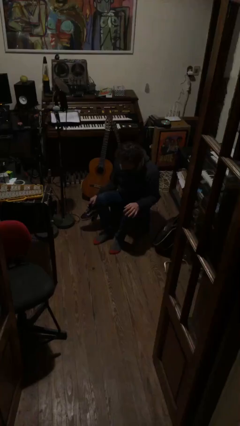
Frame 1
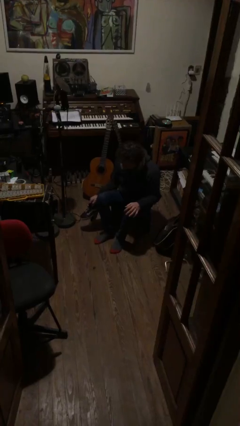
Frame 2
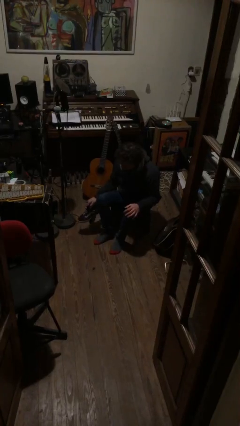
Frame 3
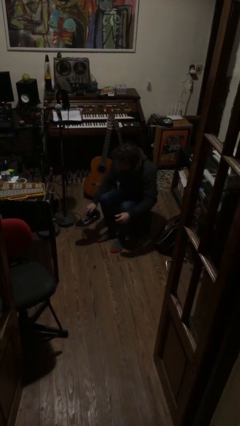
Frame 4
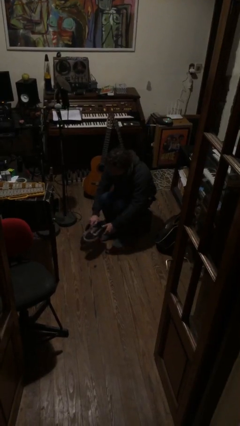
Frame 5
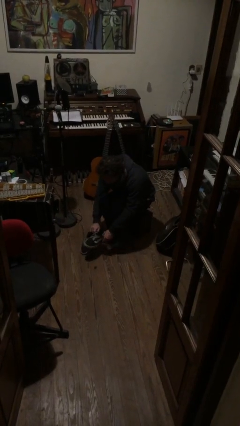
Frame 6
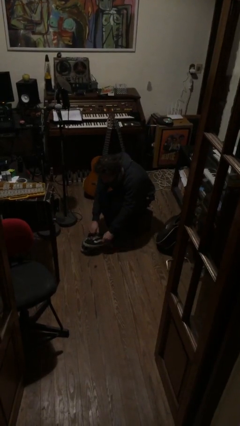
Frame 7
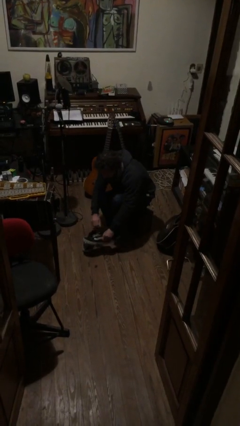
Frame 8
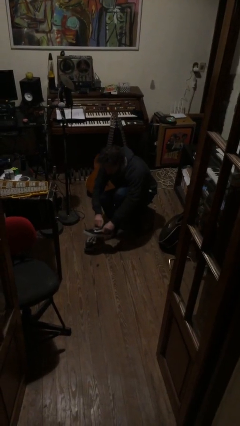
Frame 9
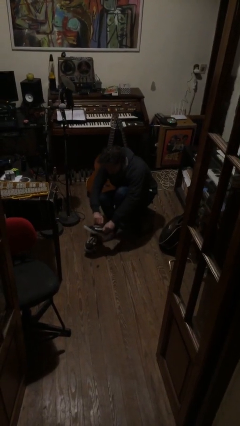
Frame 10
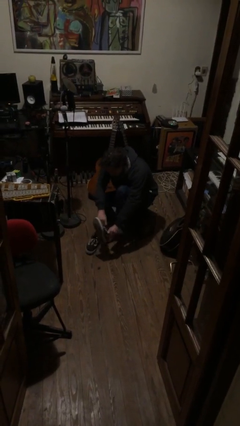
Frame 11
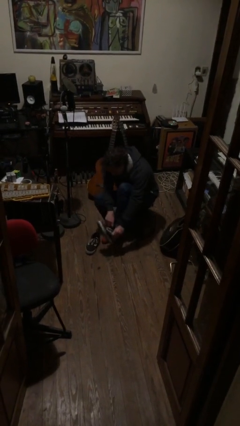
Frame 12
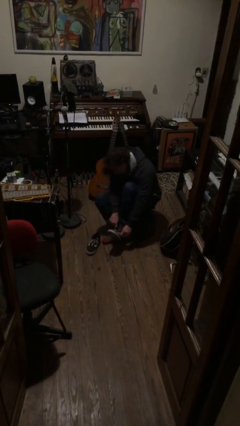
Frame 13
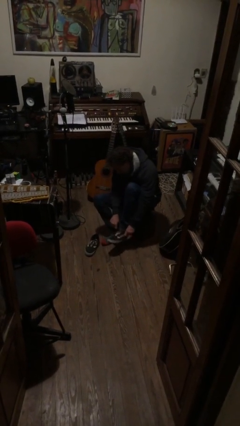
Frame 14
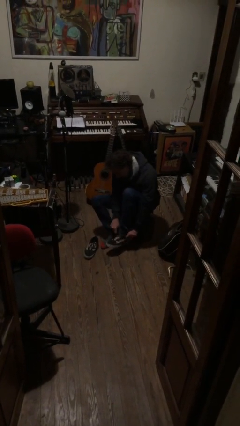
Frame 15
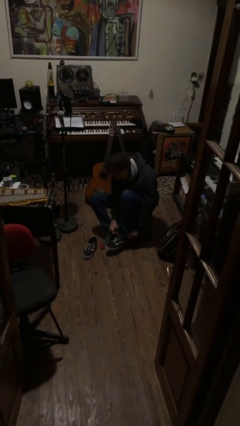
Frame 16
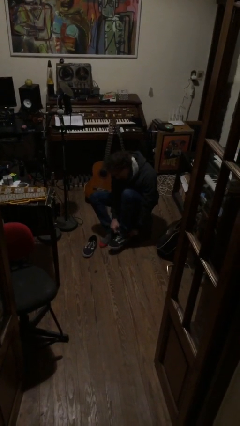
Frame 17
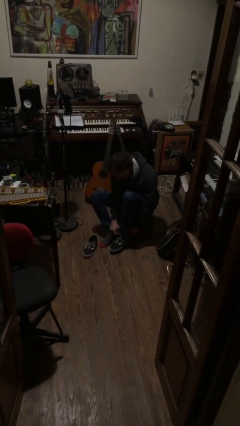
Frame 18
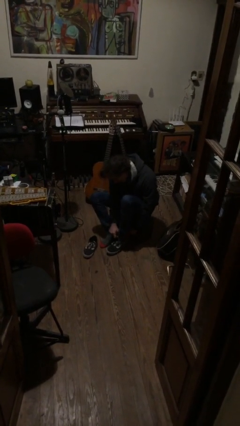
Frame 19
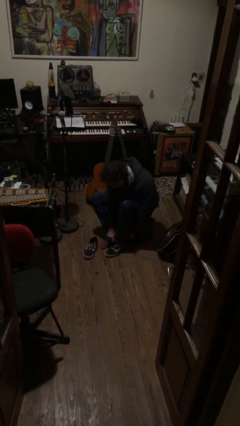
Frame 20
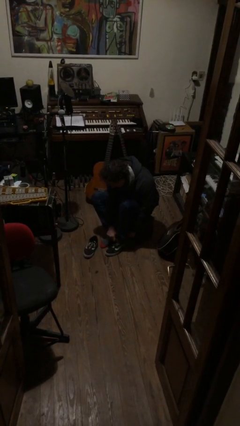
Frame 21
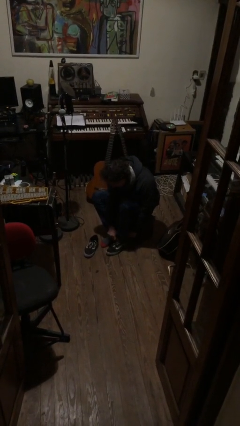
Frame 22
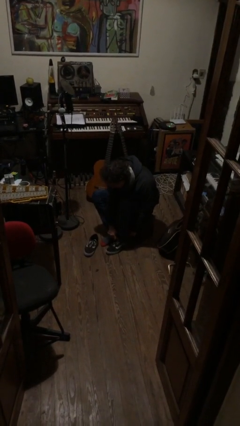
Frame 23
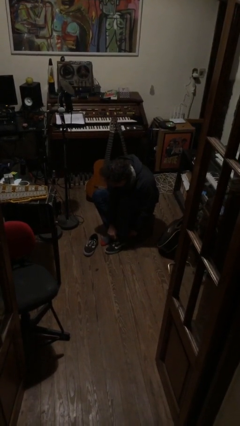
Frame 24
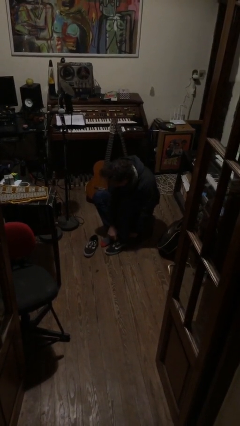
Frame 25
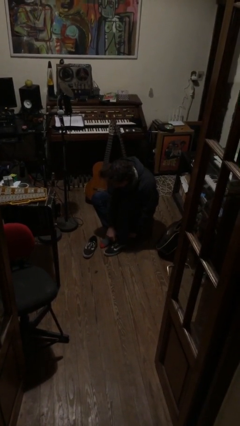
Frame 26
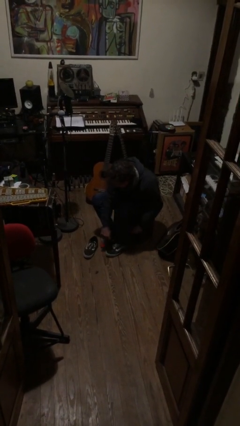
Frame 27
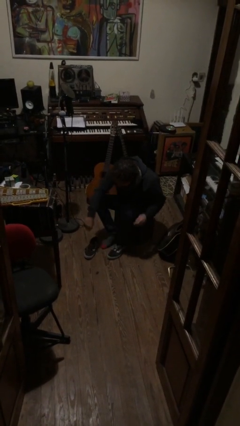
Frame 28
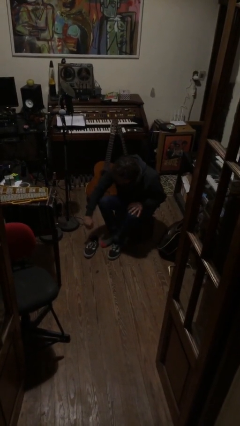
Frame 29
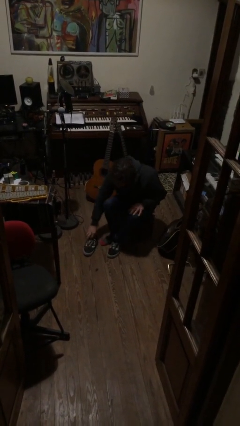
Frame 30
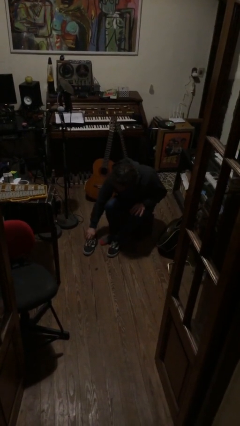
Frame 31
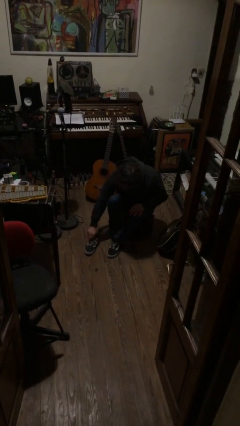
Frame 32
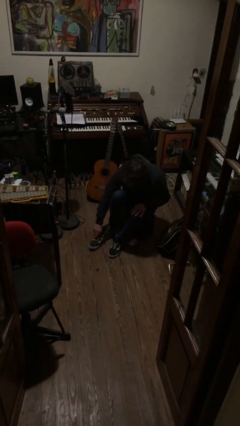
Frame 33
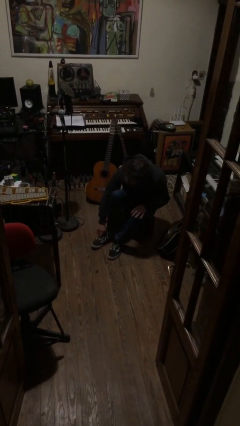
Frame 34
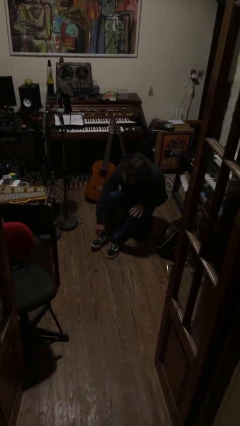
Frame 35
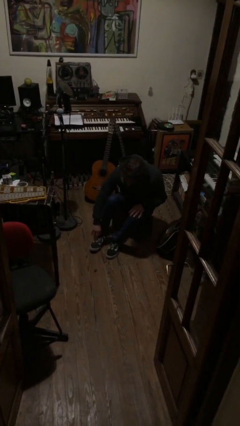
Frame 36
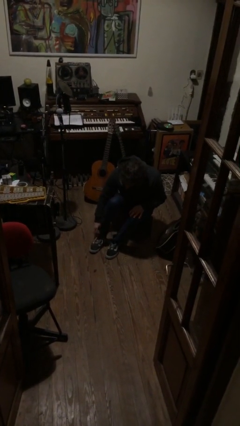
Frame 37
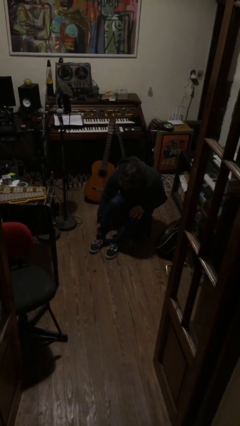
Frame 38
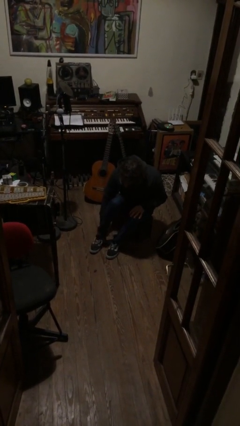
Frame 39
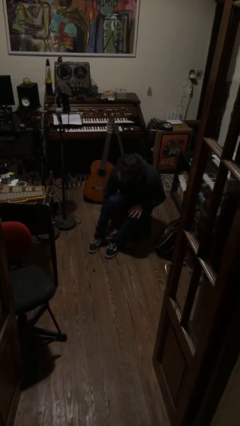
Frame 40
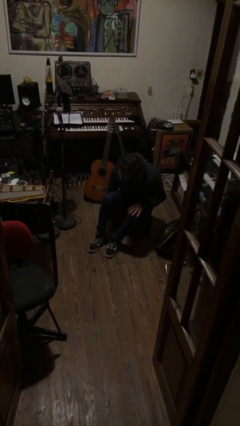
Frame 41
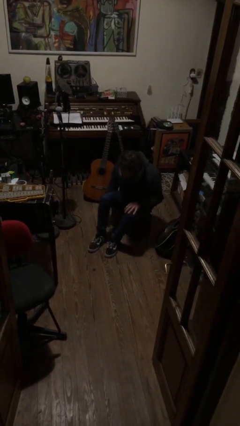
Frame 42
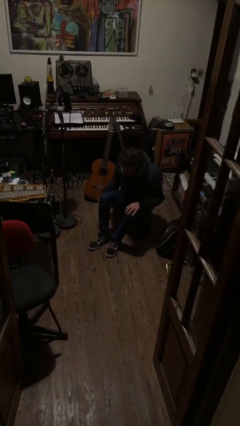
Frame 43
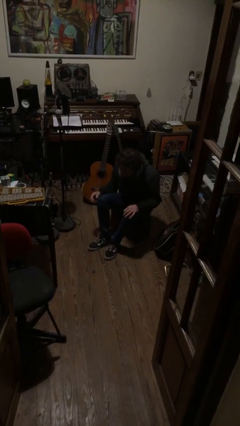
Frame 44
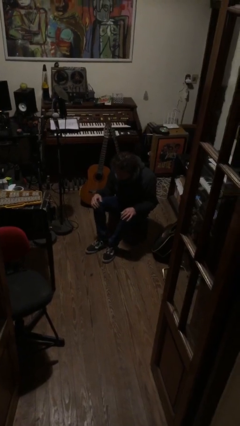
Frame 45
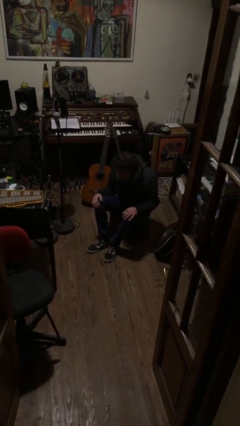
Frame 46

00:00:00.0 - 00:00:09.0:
person puts on shoes

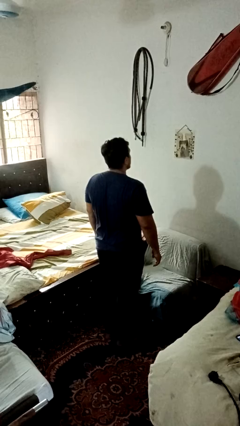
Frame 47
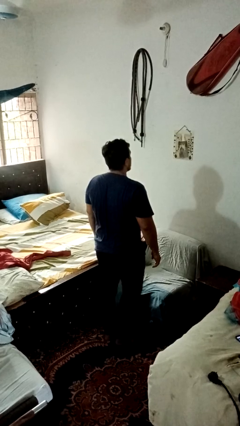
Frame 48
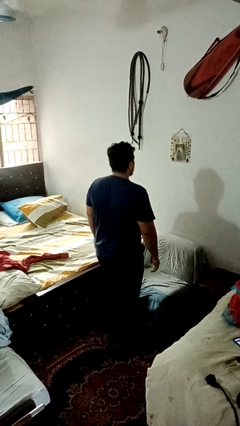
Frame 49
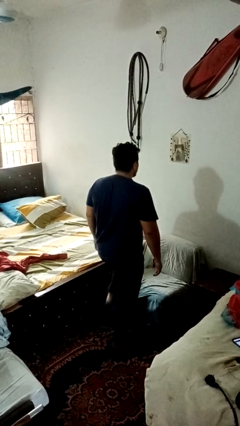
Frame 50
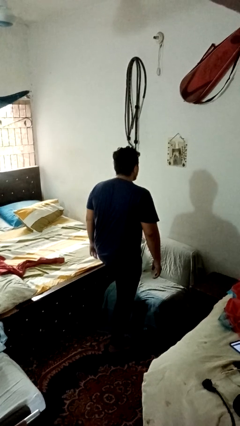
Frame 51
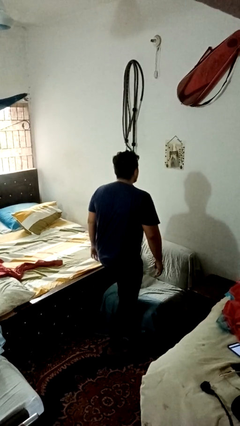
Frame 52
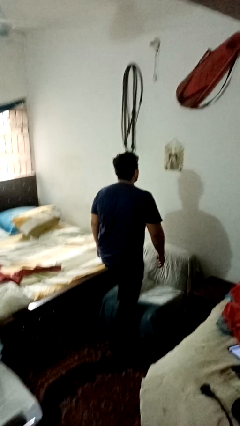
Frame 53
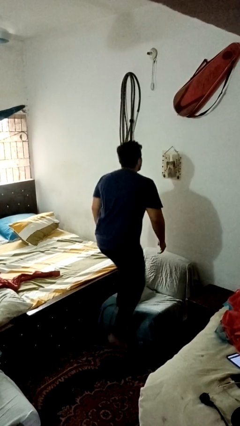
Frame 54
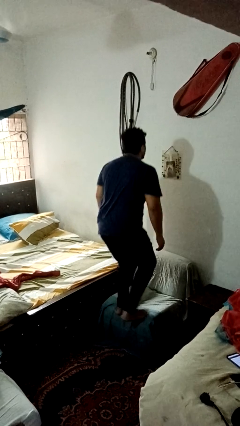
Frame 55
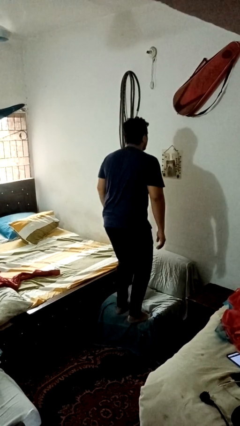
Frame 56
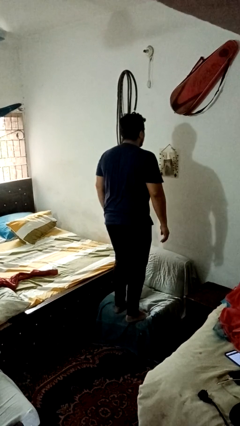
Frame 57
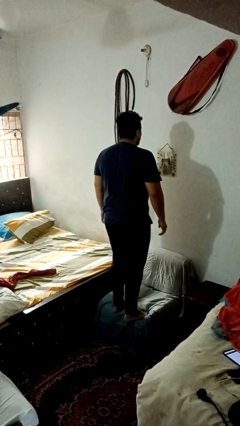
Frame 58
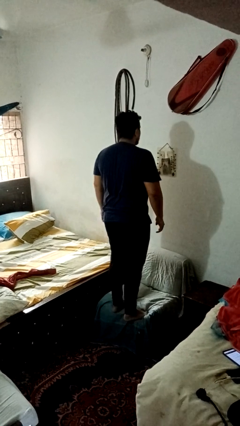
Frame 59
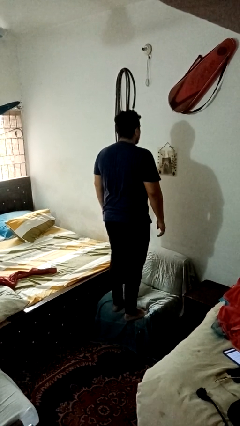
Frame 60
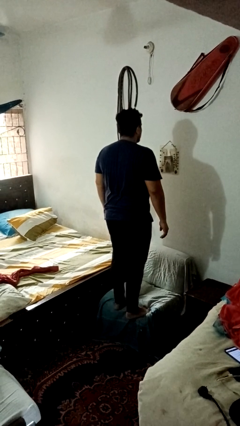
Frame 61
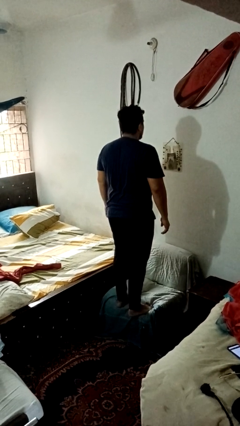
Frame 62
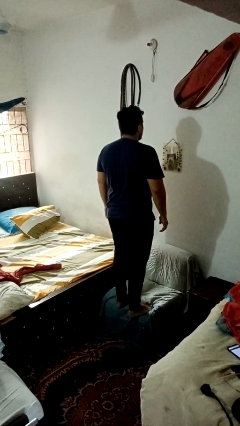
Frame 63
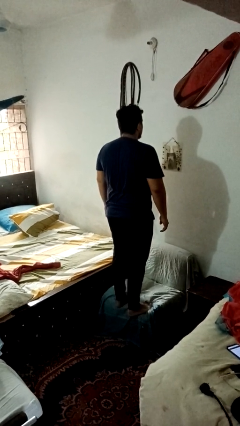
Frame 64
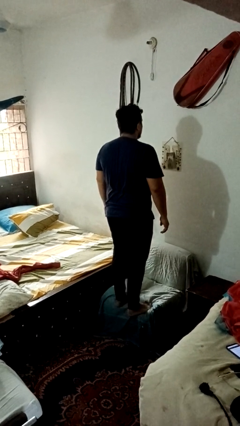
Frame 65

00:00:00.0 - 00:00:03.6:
person climbs on couch

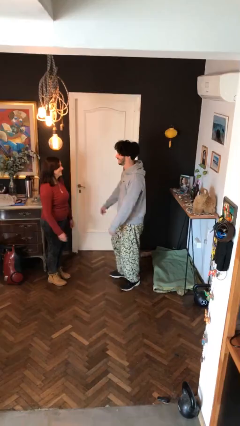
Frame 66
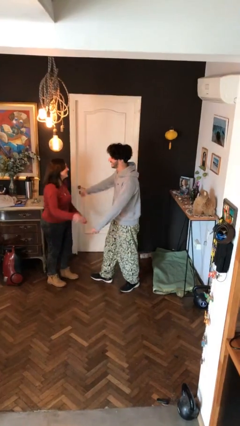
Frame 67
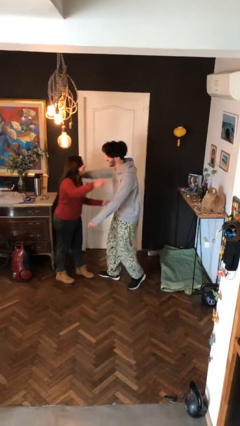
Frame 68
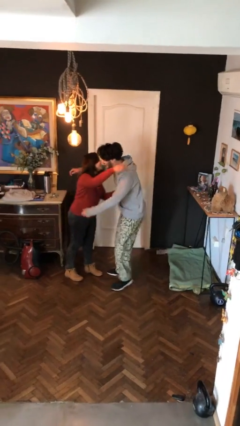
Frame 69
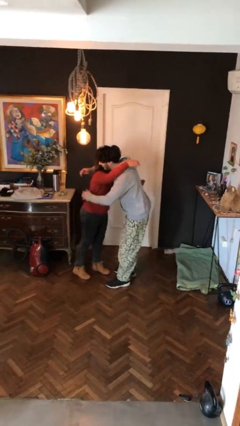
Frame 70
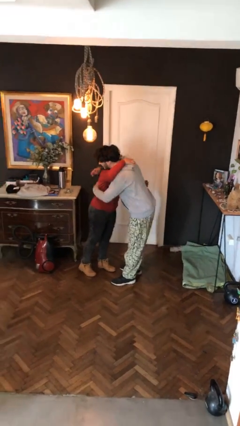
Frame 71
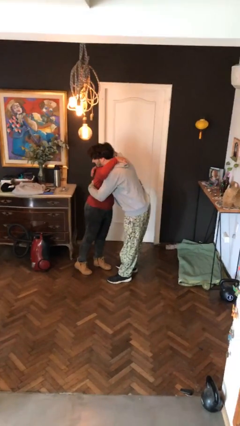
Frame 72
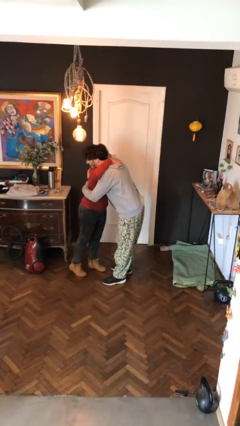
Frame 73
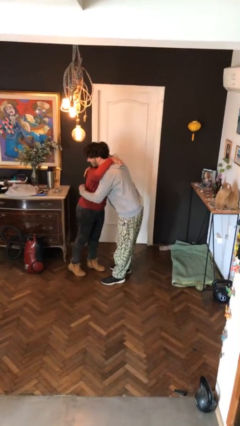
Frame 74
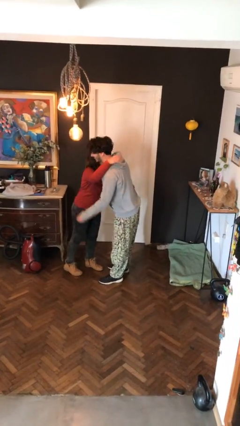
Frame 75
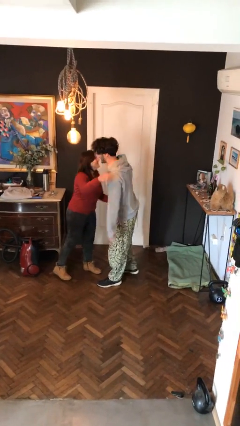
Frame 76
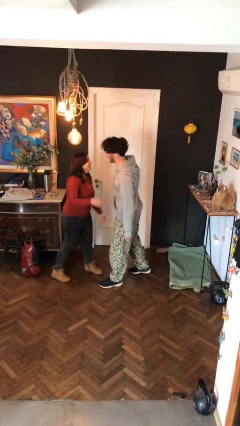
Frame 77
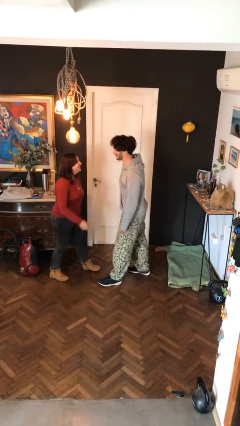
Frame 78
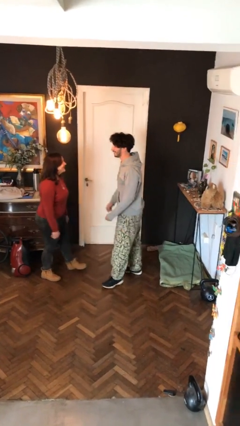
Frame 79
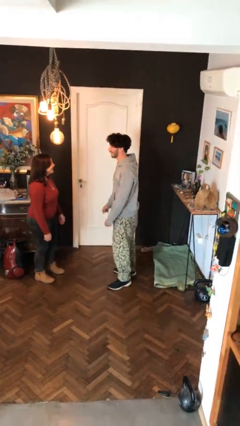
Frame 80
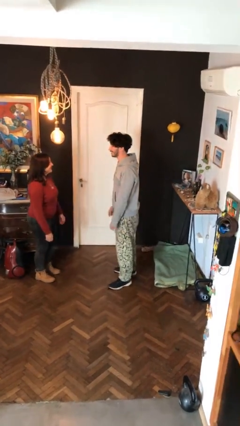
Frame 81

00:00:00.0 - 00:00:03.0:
person embraces person

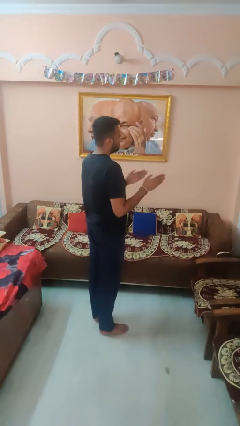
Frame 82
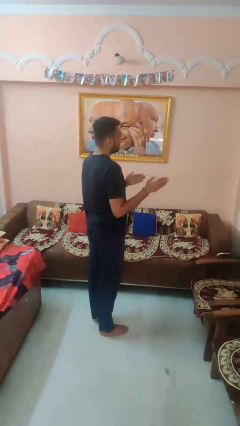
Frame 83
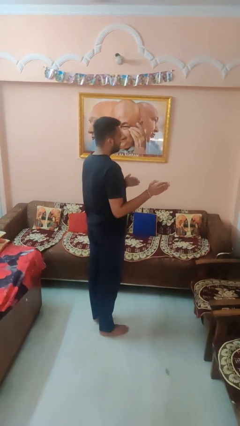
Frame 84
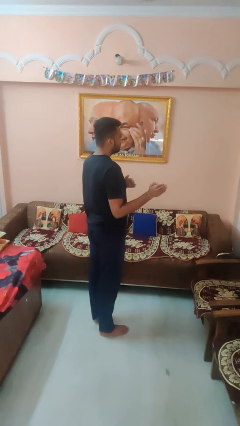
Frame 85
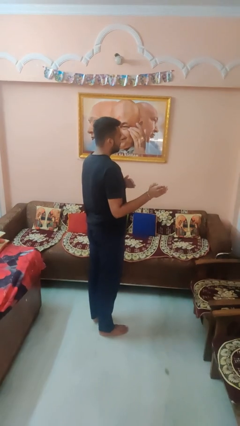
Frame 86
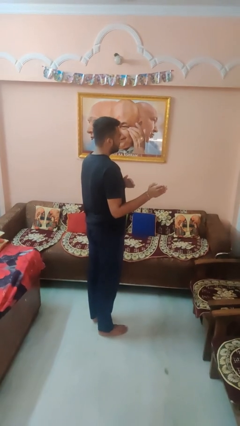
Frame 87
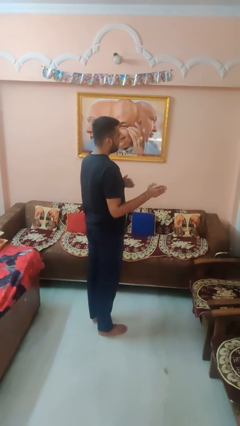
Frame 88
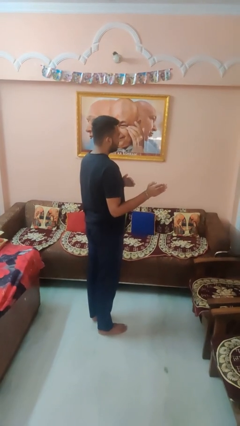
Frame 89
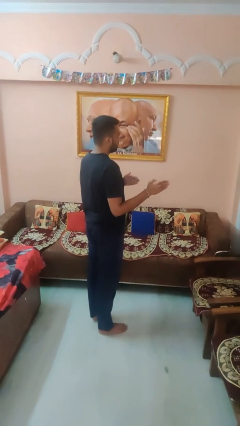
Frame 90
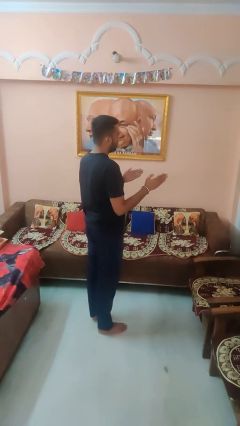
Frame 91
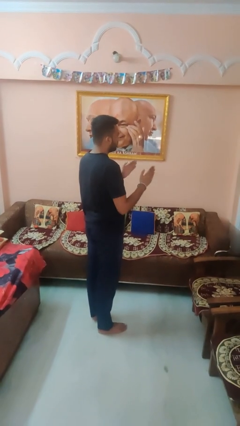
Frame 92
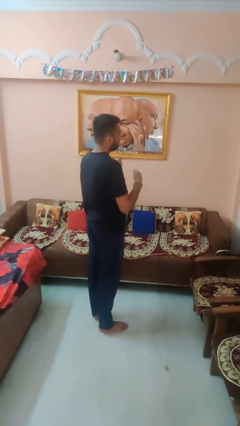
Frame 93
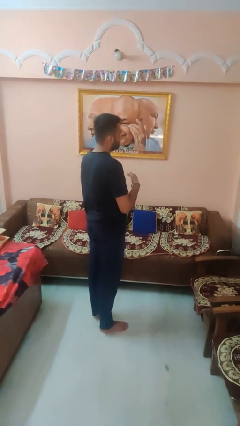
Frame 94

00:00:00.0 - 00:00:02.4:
person gestures swipe right
